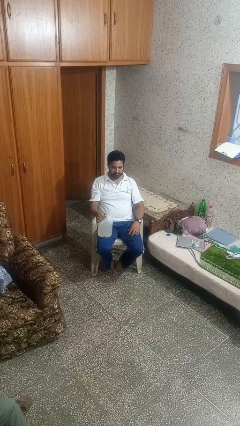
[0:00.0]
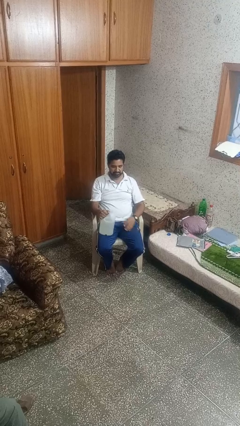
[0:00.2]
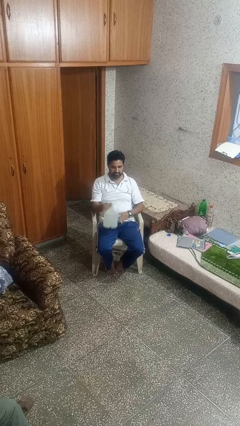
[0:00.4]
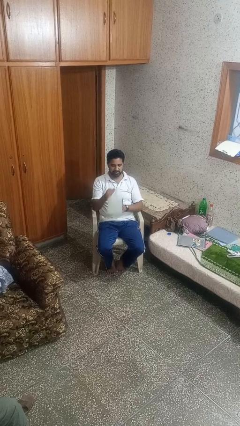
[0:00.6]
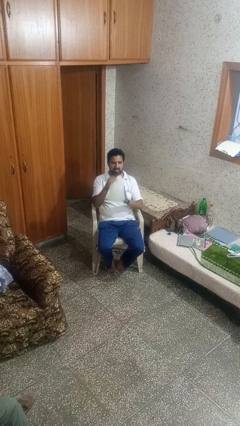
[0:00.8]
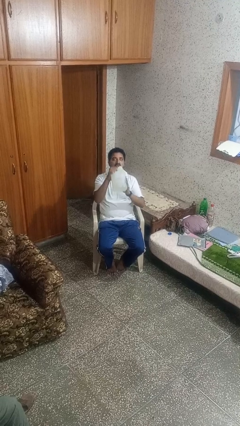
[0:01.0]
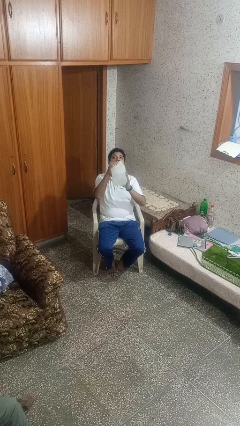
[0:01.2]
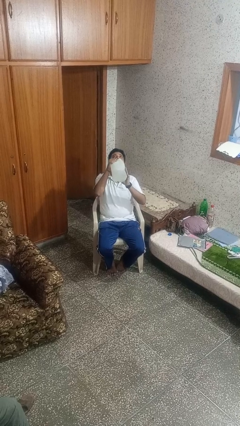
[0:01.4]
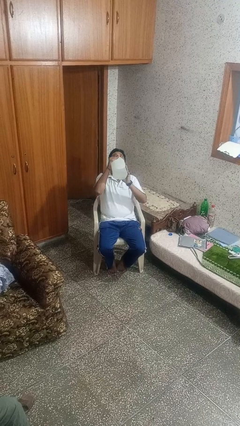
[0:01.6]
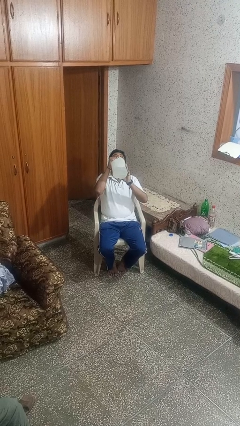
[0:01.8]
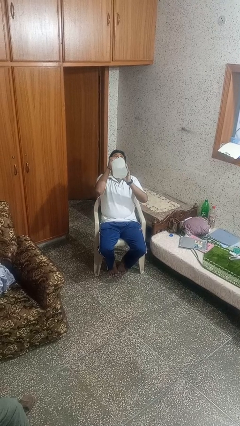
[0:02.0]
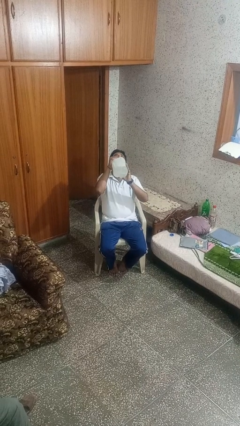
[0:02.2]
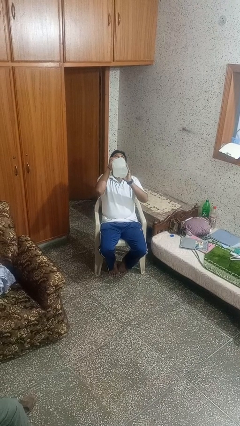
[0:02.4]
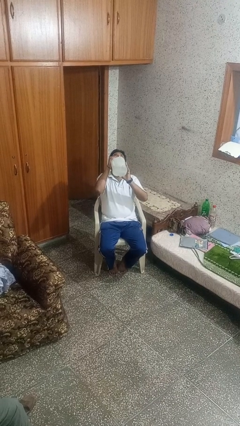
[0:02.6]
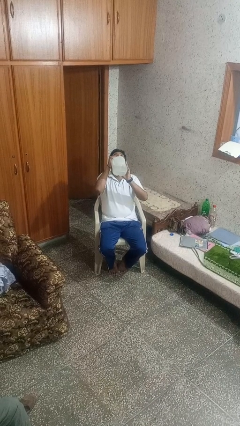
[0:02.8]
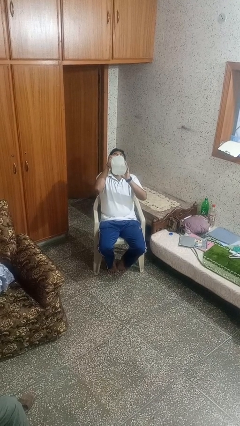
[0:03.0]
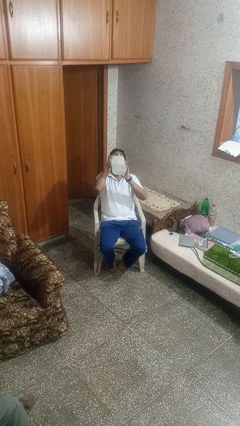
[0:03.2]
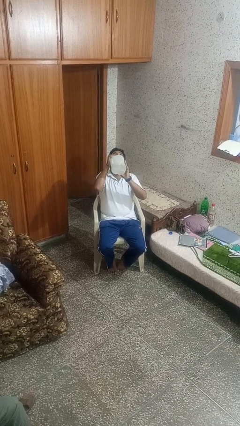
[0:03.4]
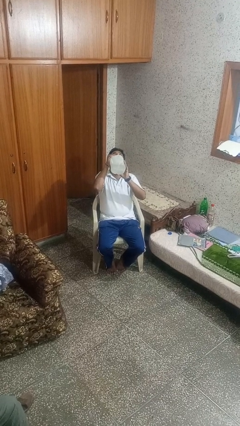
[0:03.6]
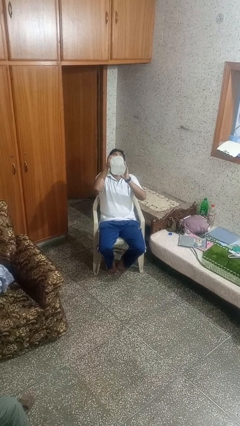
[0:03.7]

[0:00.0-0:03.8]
person drinks from bottle

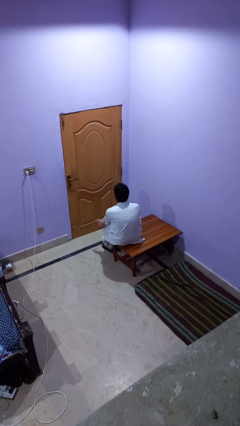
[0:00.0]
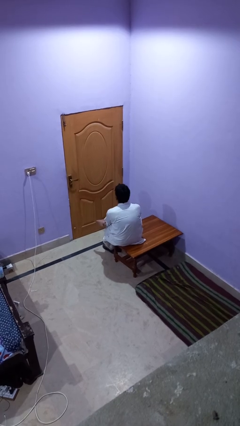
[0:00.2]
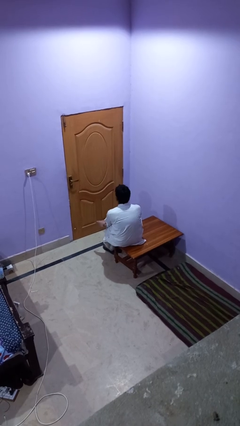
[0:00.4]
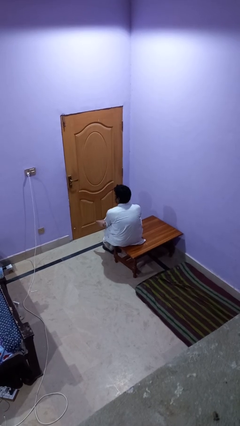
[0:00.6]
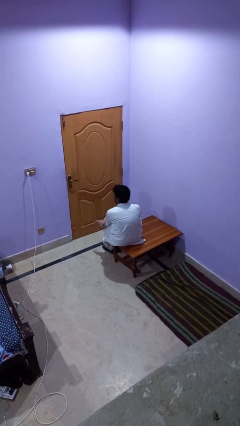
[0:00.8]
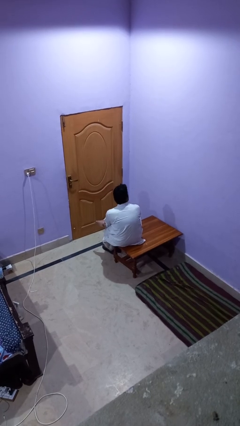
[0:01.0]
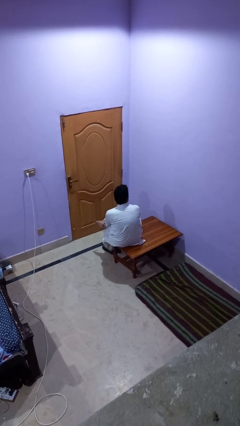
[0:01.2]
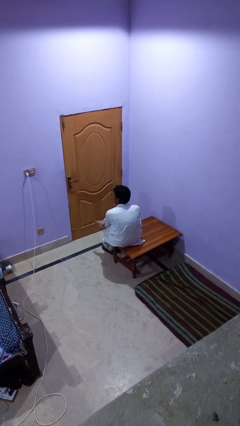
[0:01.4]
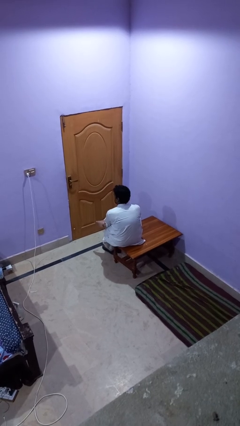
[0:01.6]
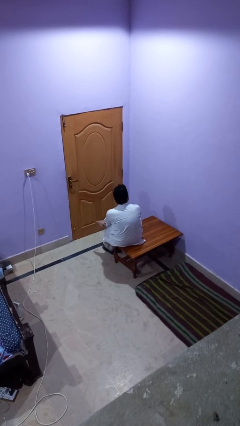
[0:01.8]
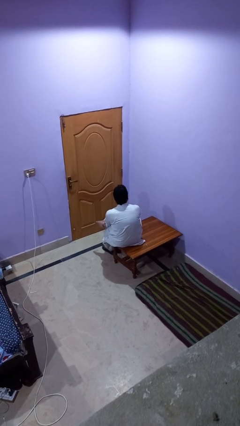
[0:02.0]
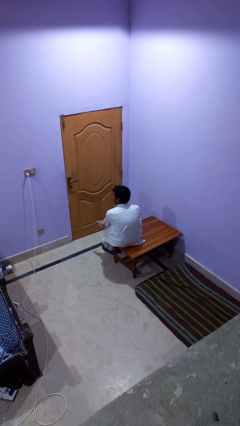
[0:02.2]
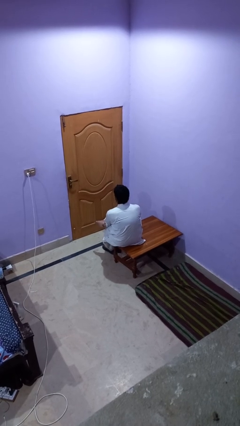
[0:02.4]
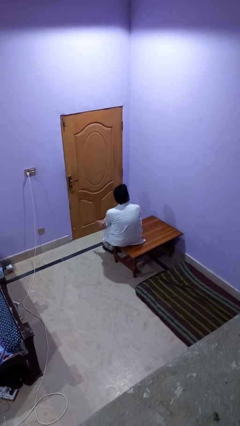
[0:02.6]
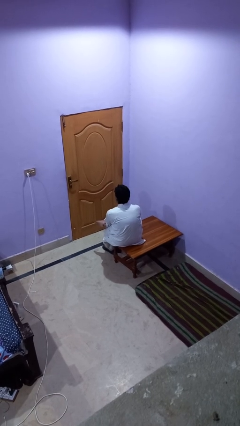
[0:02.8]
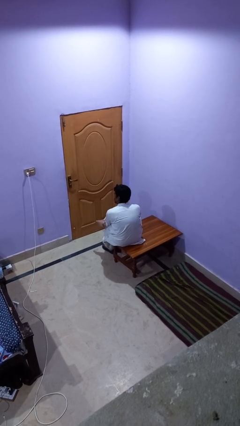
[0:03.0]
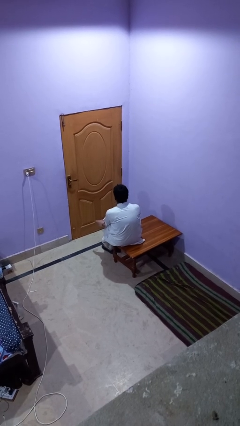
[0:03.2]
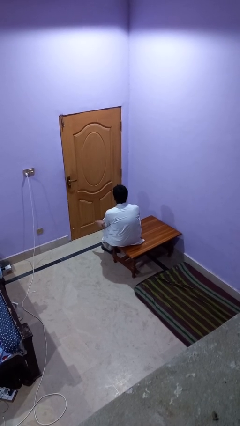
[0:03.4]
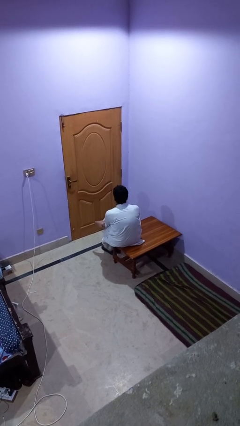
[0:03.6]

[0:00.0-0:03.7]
person shakes head

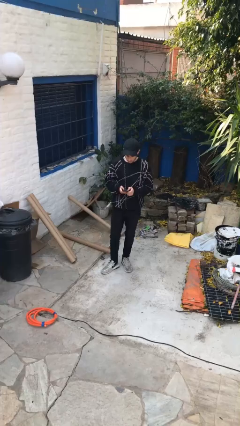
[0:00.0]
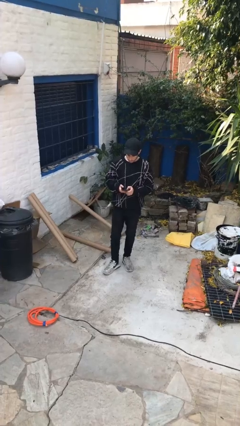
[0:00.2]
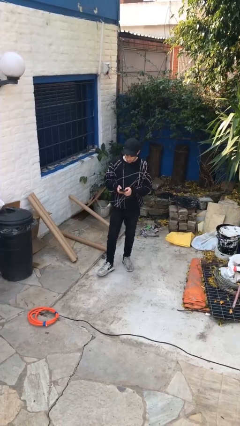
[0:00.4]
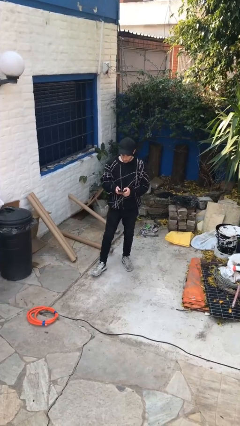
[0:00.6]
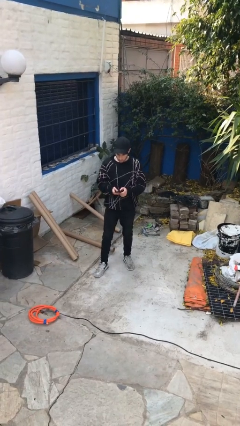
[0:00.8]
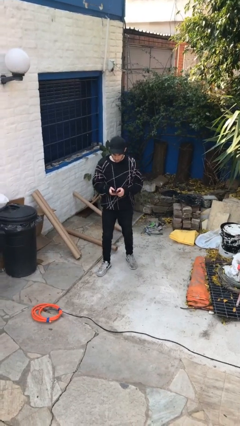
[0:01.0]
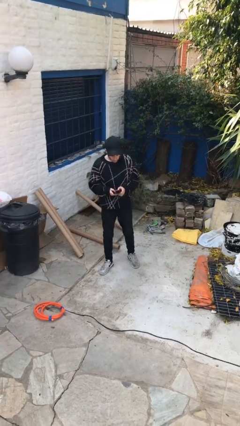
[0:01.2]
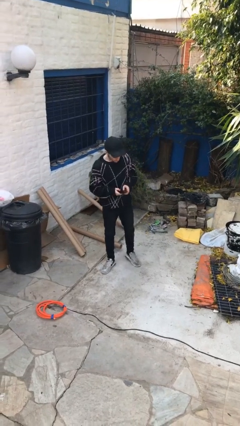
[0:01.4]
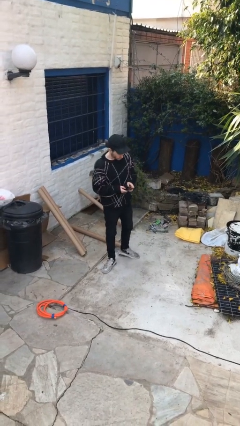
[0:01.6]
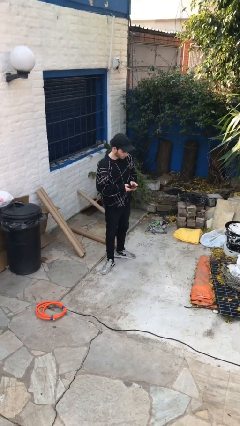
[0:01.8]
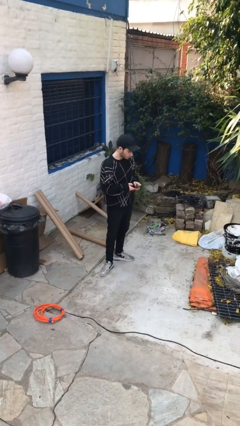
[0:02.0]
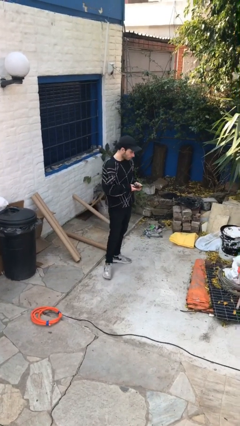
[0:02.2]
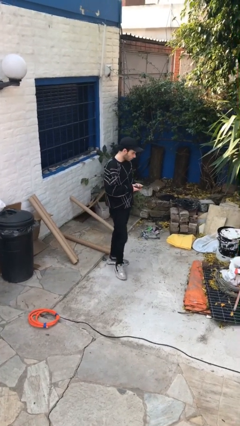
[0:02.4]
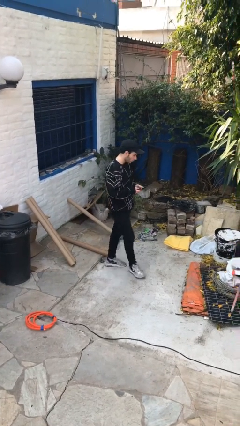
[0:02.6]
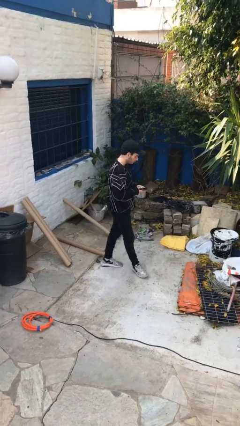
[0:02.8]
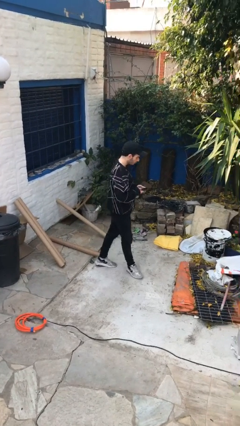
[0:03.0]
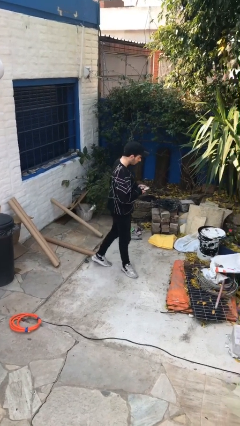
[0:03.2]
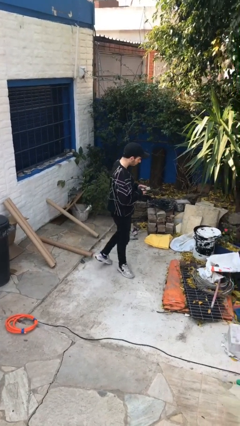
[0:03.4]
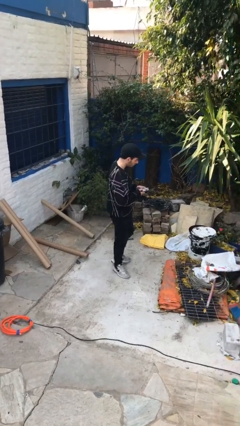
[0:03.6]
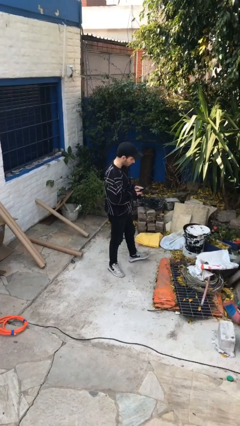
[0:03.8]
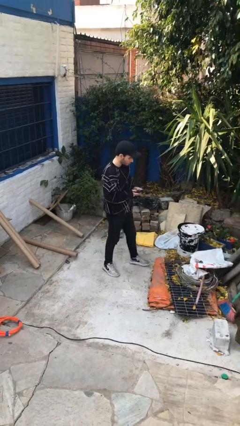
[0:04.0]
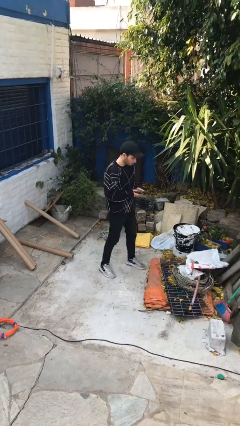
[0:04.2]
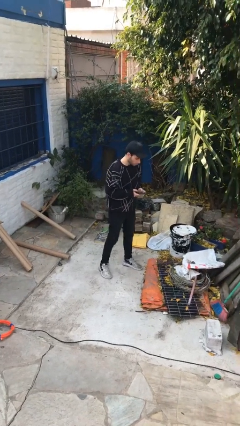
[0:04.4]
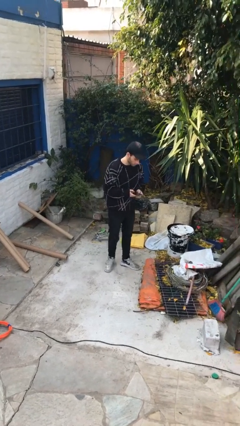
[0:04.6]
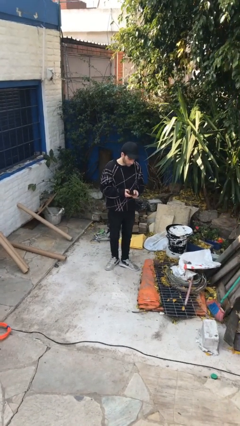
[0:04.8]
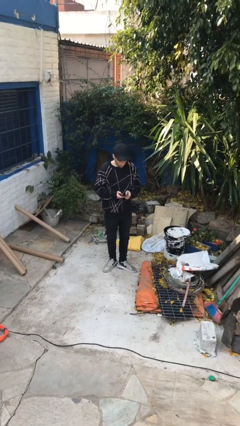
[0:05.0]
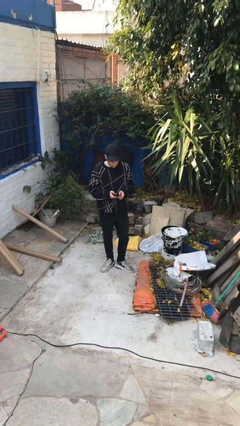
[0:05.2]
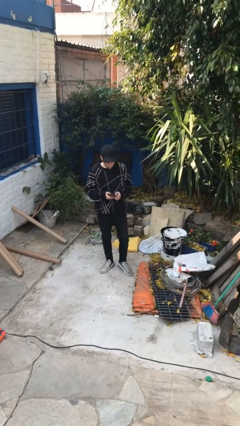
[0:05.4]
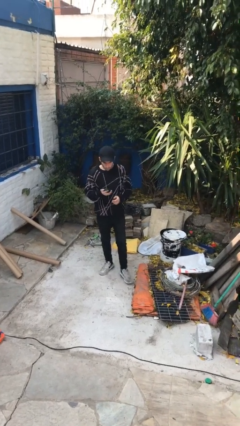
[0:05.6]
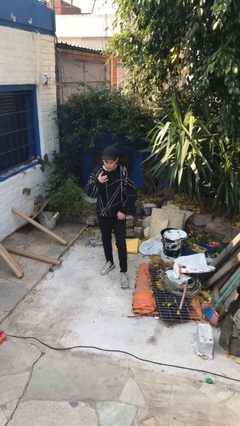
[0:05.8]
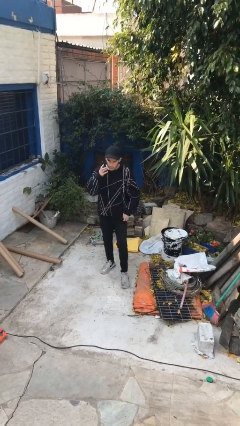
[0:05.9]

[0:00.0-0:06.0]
person texts on phone

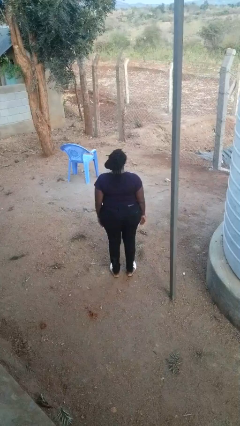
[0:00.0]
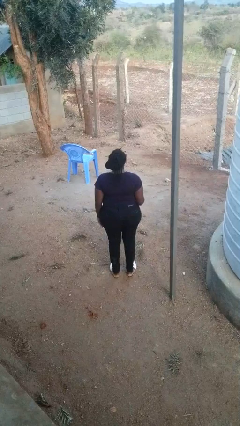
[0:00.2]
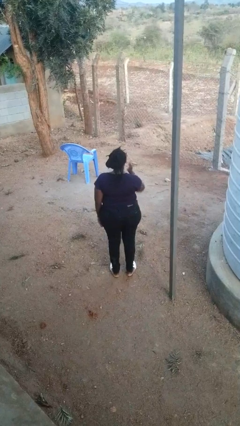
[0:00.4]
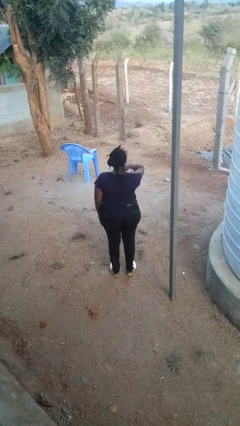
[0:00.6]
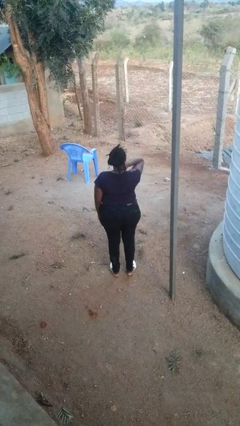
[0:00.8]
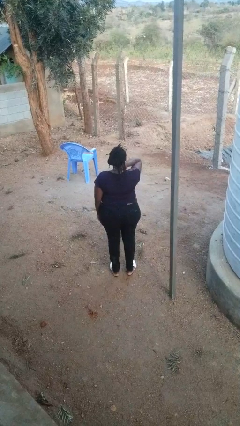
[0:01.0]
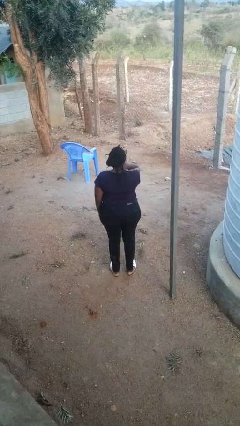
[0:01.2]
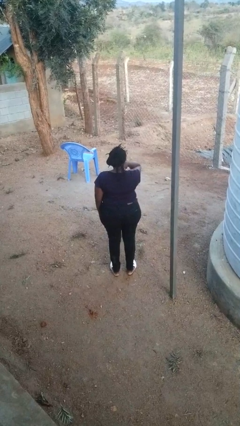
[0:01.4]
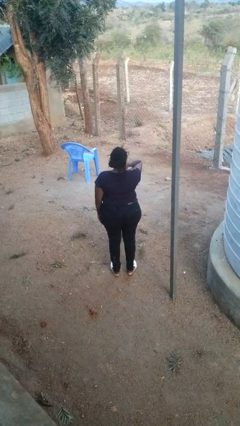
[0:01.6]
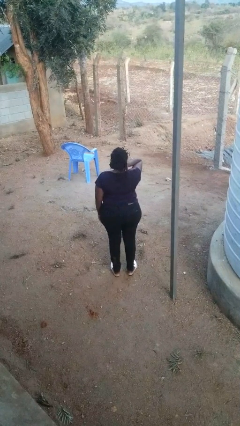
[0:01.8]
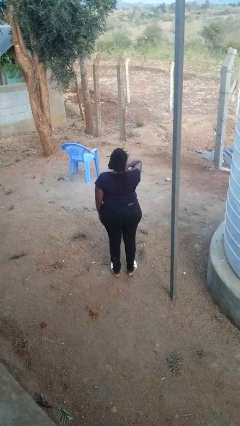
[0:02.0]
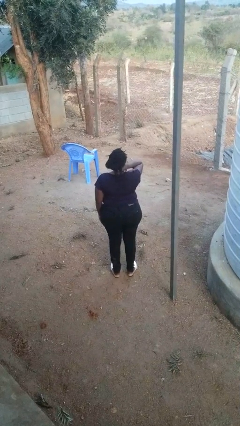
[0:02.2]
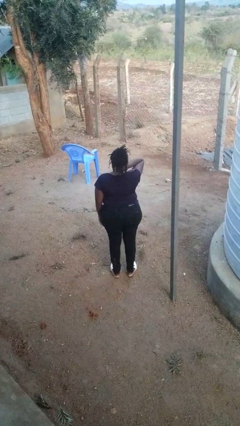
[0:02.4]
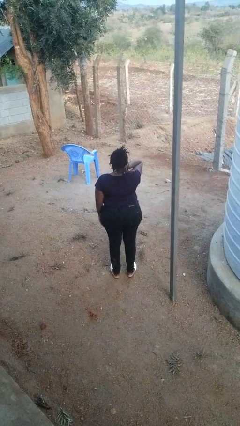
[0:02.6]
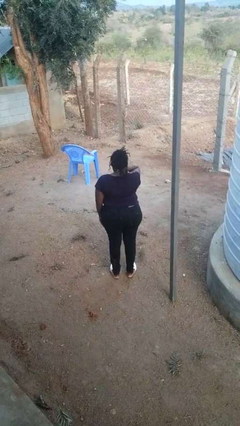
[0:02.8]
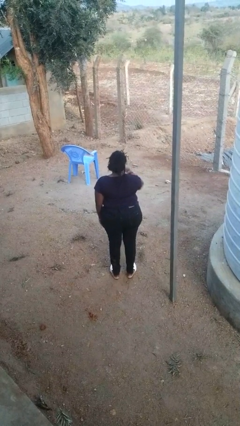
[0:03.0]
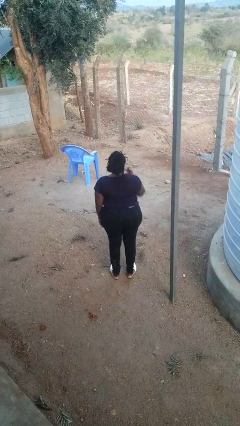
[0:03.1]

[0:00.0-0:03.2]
person rubs neck

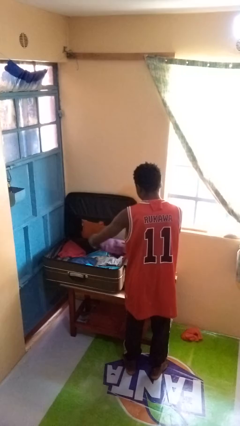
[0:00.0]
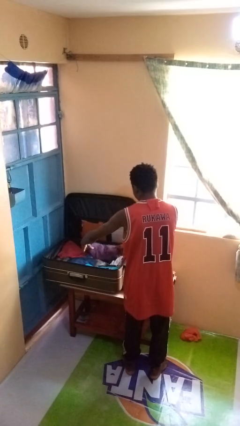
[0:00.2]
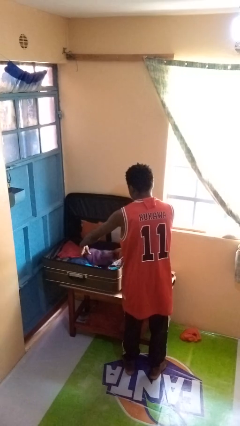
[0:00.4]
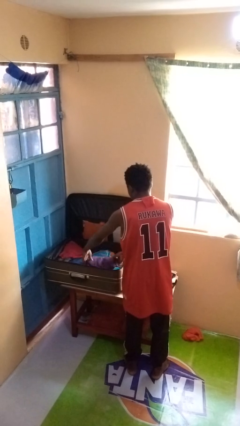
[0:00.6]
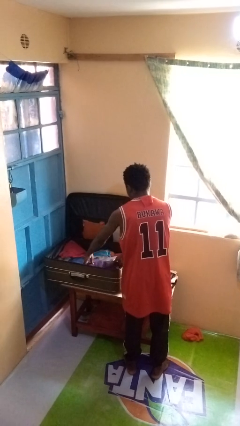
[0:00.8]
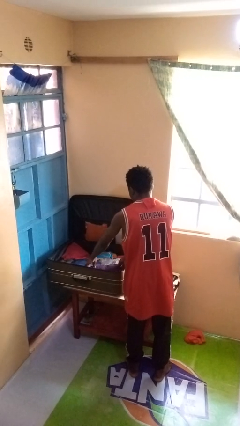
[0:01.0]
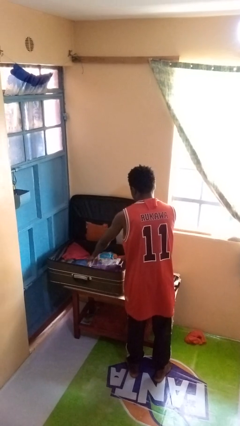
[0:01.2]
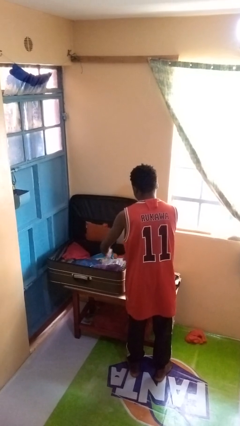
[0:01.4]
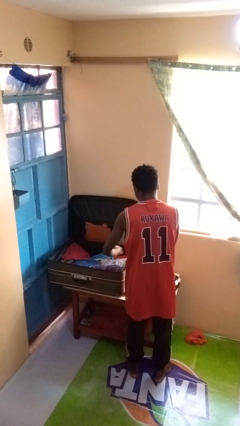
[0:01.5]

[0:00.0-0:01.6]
person loads clothes into suitcase
